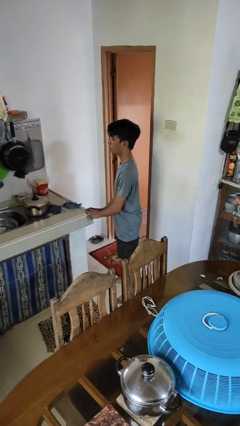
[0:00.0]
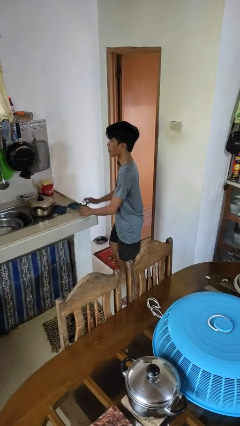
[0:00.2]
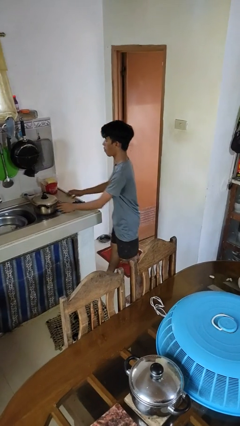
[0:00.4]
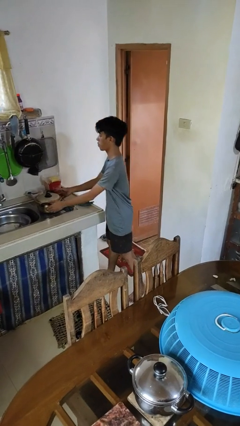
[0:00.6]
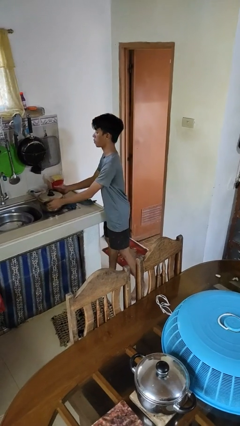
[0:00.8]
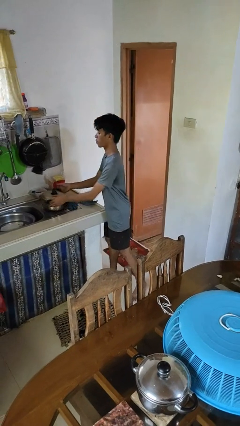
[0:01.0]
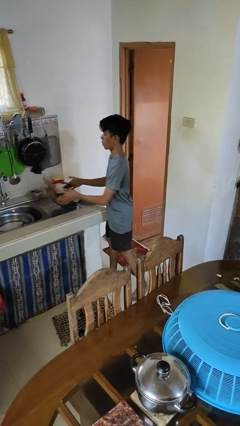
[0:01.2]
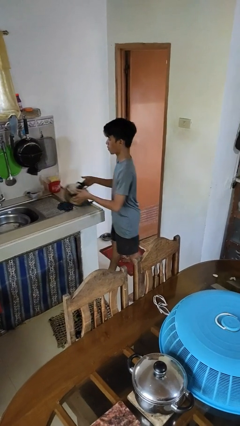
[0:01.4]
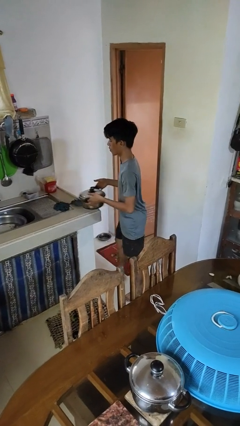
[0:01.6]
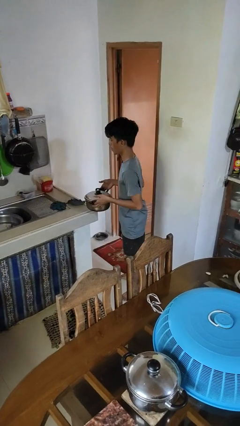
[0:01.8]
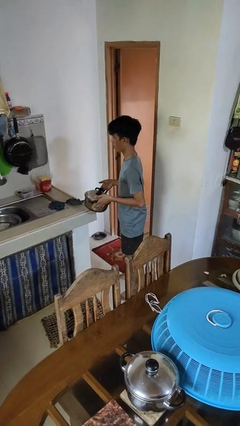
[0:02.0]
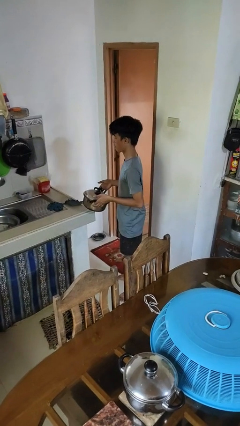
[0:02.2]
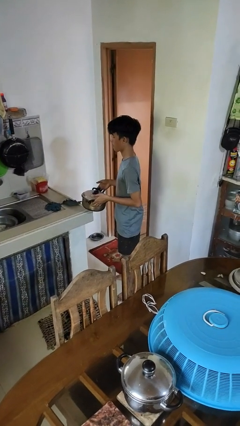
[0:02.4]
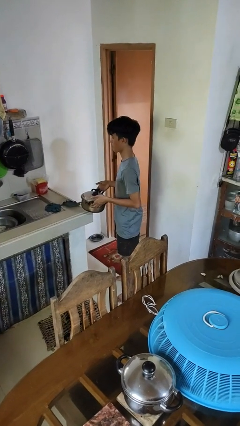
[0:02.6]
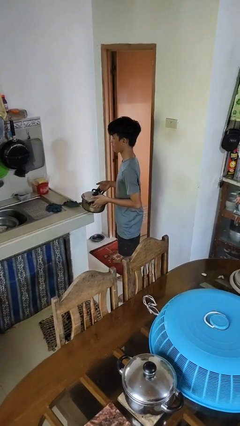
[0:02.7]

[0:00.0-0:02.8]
person picks up object from countertop

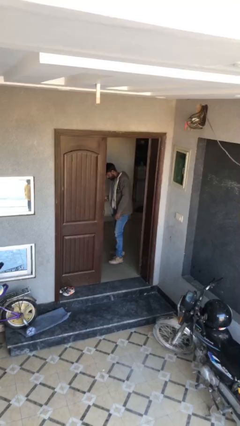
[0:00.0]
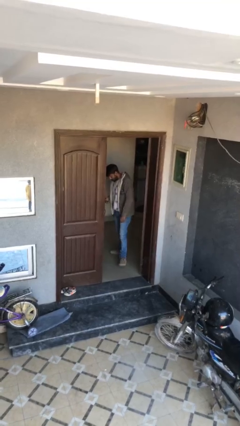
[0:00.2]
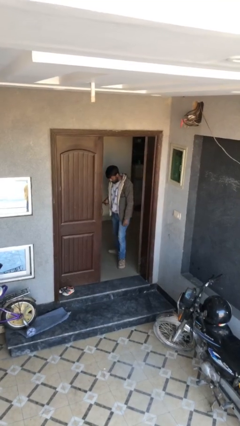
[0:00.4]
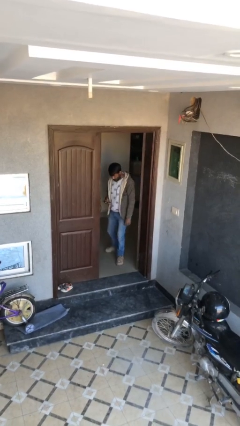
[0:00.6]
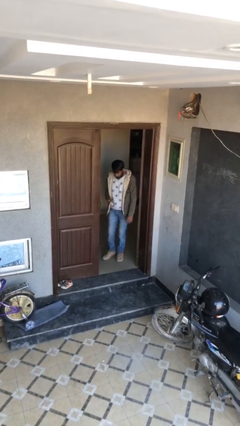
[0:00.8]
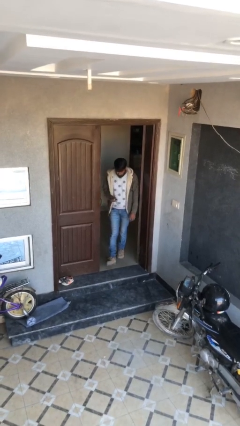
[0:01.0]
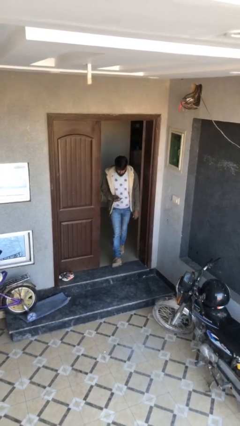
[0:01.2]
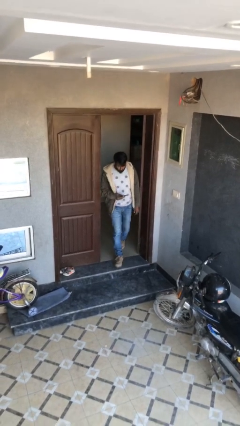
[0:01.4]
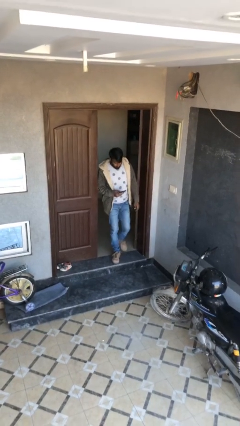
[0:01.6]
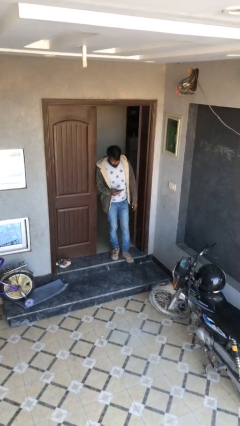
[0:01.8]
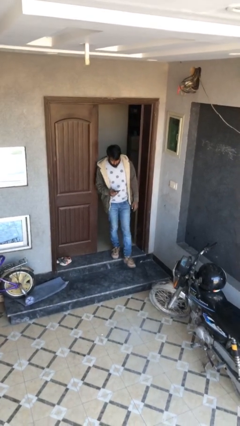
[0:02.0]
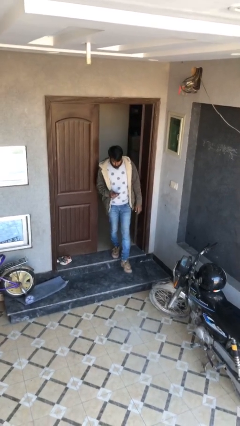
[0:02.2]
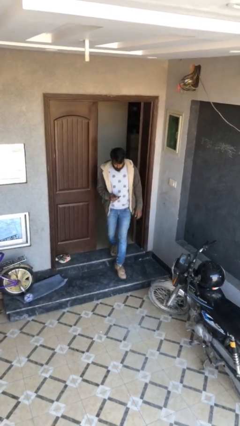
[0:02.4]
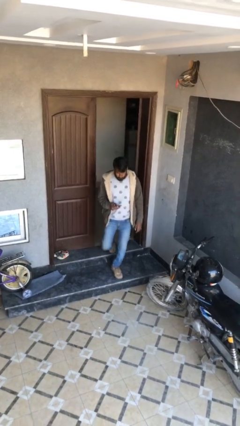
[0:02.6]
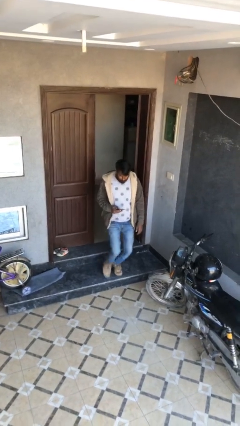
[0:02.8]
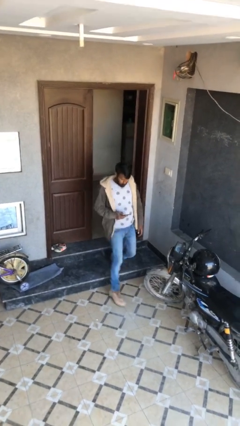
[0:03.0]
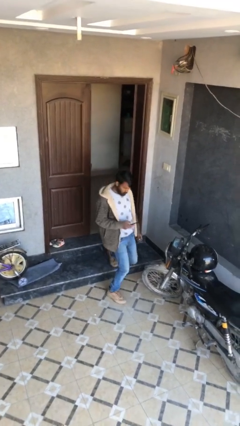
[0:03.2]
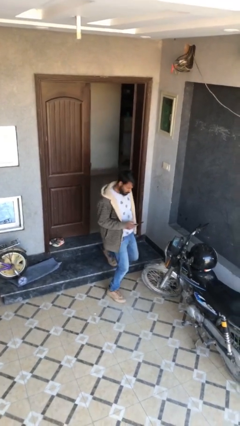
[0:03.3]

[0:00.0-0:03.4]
person enters scene through structure

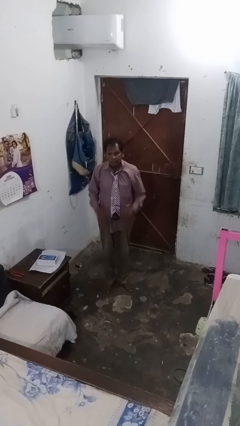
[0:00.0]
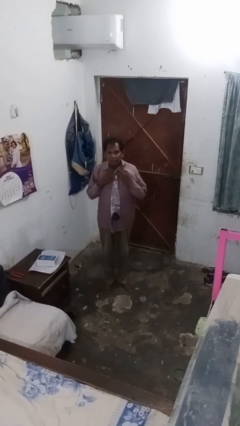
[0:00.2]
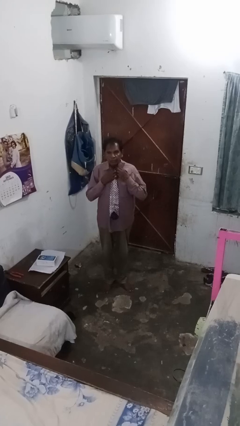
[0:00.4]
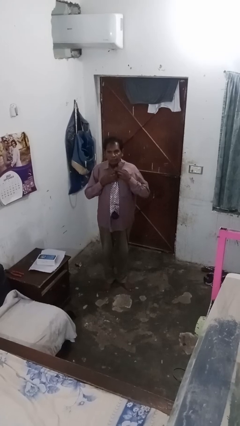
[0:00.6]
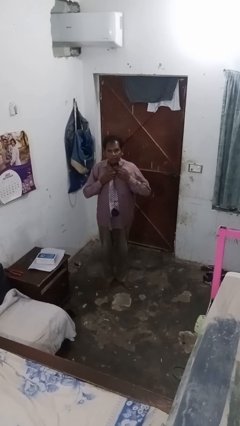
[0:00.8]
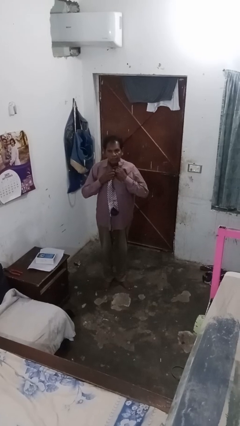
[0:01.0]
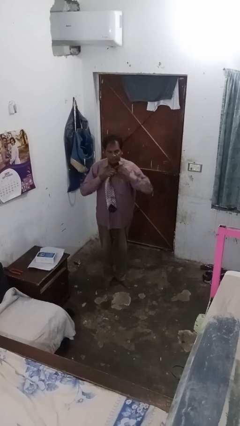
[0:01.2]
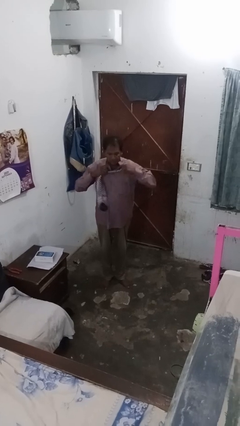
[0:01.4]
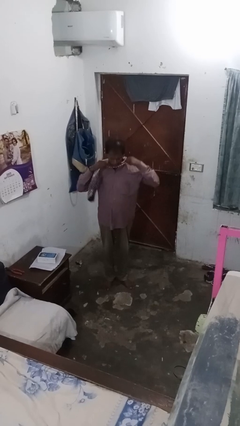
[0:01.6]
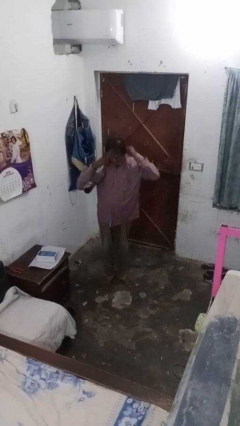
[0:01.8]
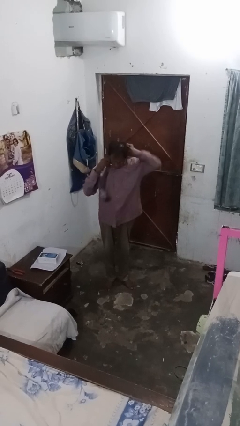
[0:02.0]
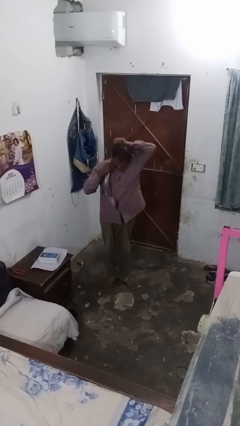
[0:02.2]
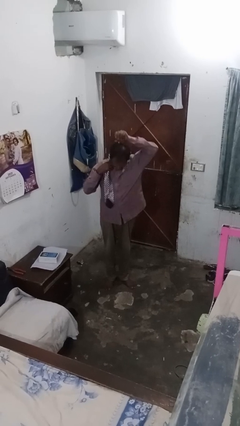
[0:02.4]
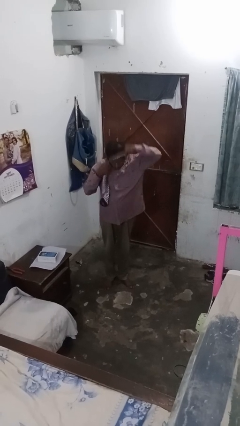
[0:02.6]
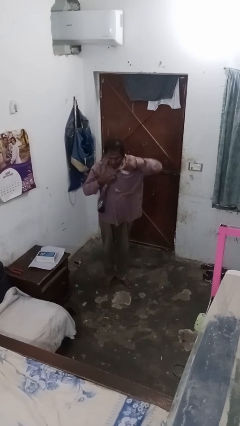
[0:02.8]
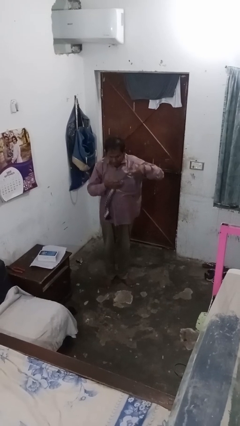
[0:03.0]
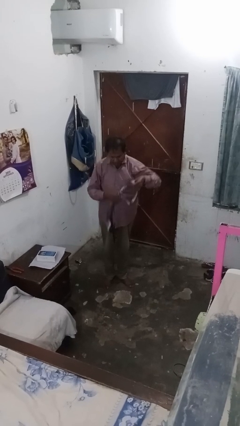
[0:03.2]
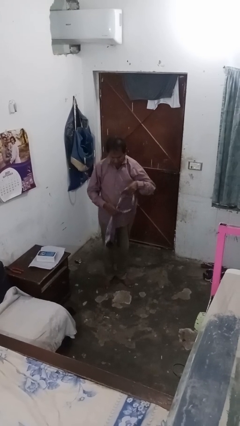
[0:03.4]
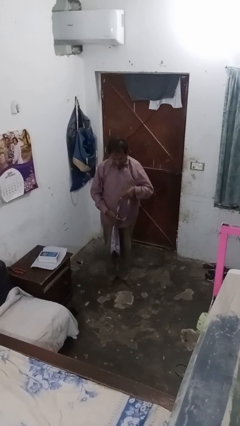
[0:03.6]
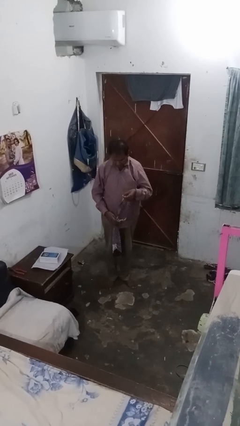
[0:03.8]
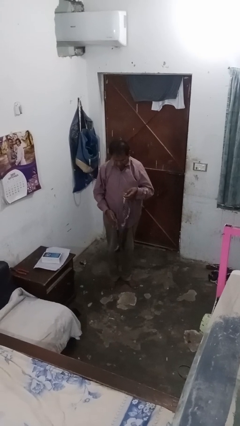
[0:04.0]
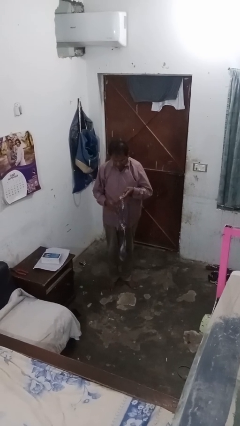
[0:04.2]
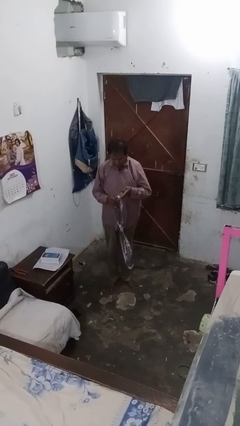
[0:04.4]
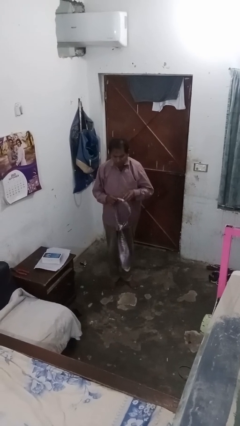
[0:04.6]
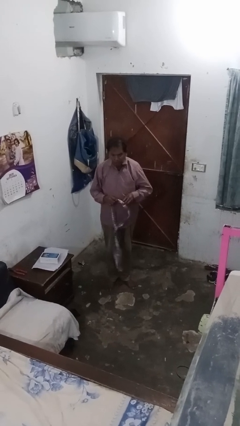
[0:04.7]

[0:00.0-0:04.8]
person takes off necktie

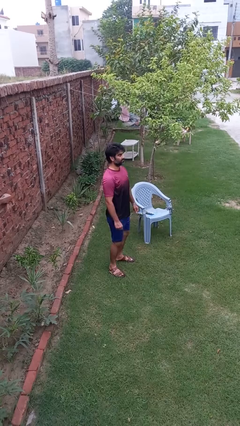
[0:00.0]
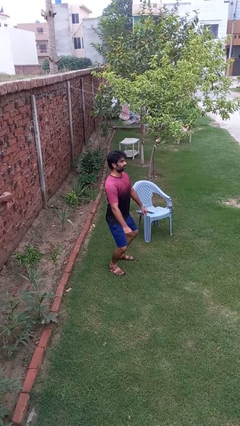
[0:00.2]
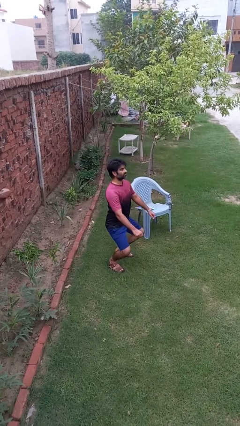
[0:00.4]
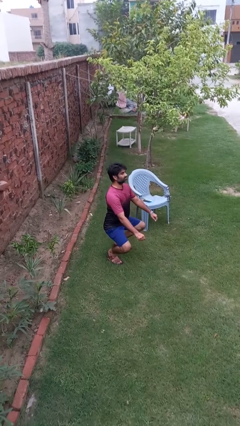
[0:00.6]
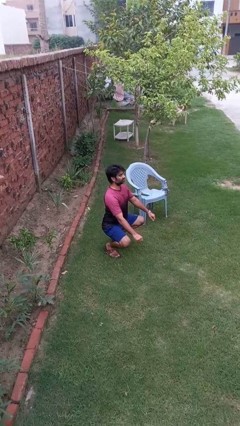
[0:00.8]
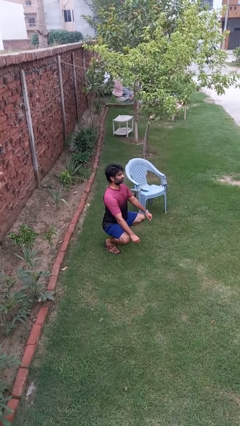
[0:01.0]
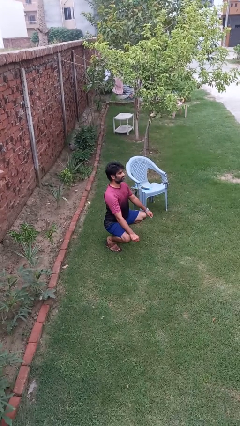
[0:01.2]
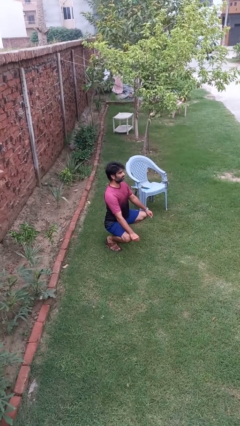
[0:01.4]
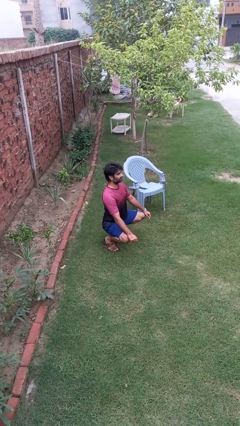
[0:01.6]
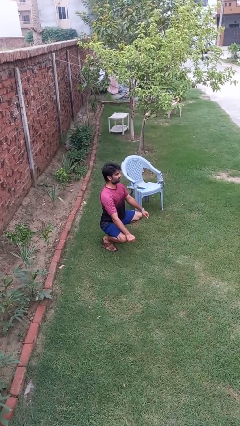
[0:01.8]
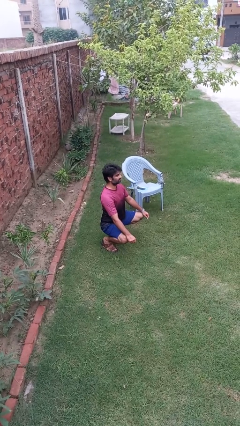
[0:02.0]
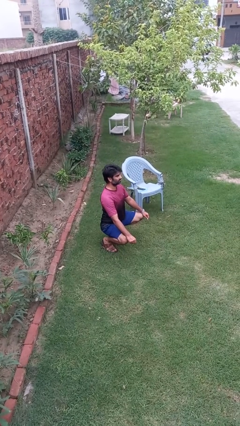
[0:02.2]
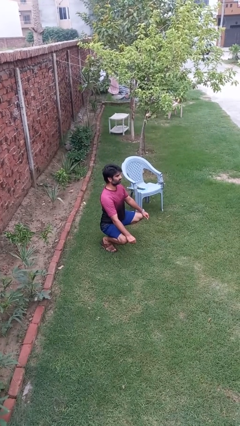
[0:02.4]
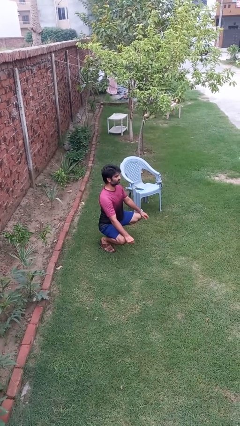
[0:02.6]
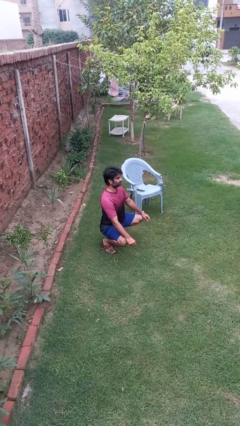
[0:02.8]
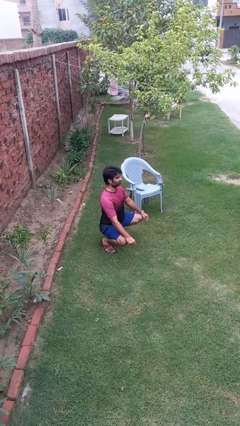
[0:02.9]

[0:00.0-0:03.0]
person squats

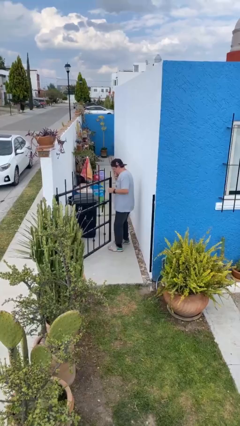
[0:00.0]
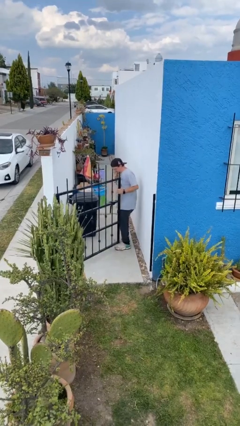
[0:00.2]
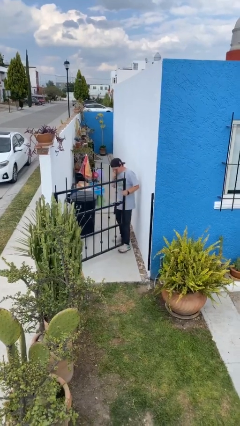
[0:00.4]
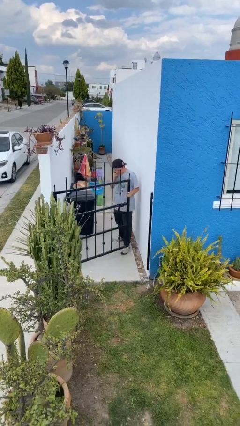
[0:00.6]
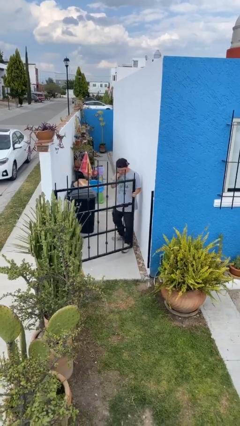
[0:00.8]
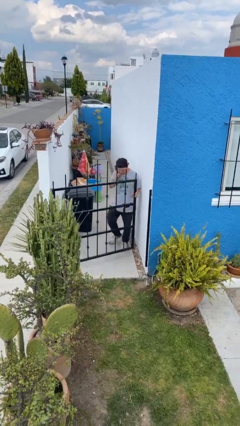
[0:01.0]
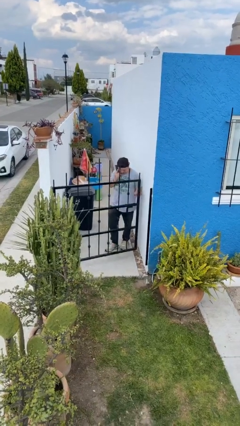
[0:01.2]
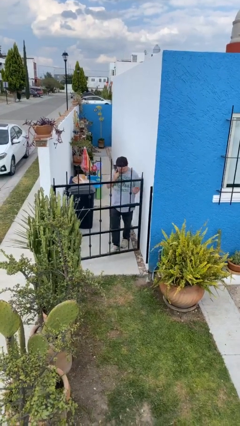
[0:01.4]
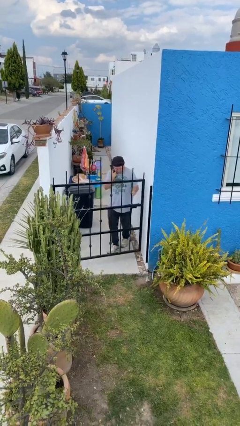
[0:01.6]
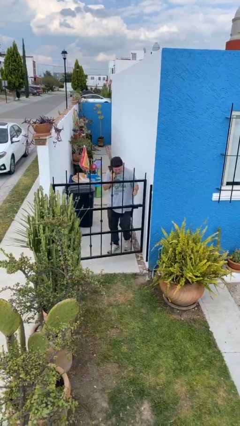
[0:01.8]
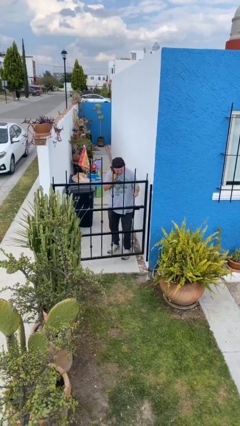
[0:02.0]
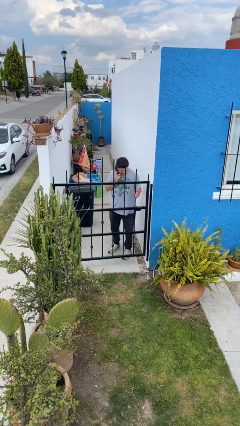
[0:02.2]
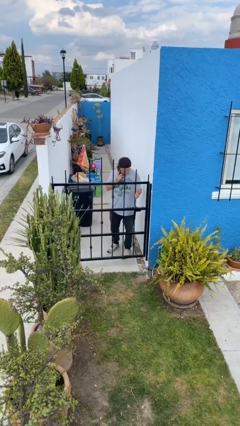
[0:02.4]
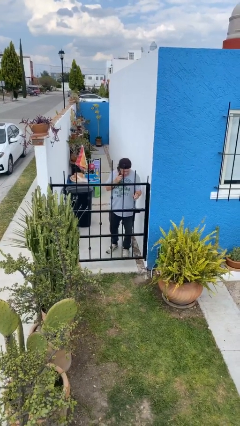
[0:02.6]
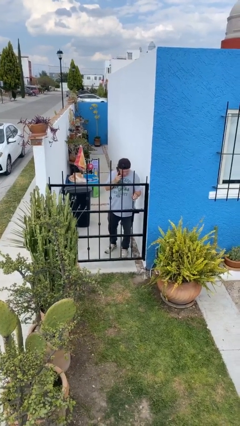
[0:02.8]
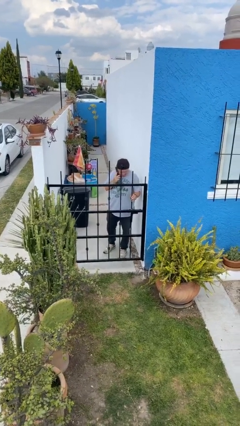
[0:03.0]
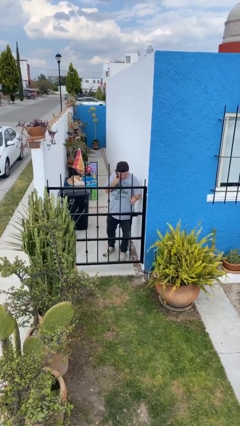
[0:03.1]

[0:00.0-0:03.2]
person closes facility door
